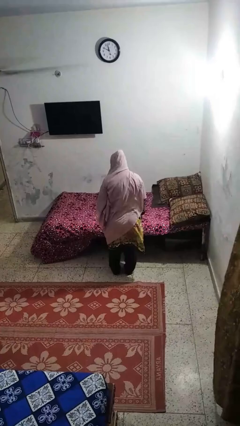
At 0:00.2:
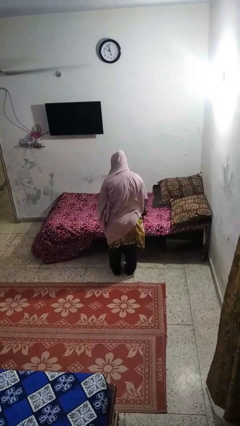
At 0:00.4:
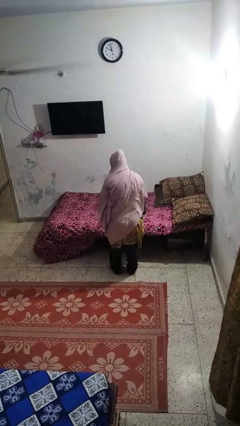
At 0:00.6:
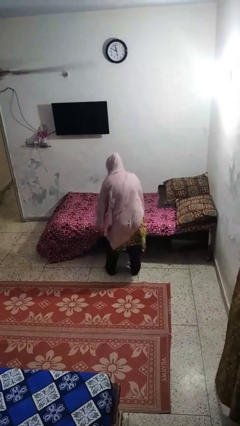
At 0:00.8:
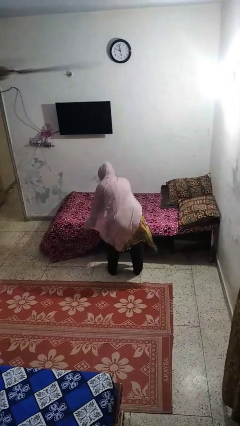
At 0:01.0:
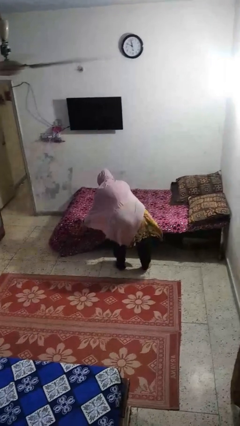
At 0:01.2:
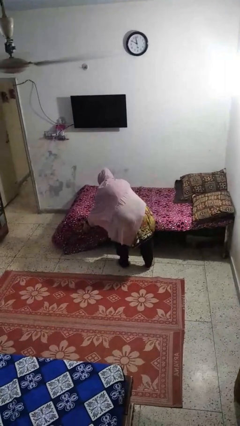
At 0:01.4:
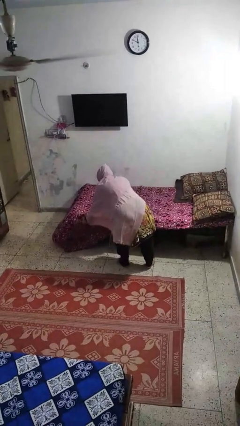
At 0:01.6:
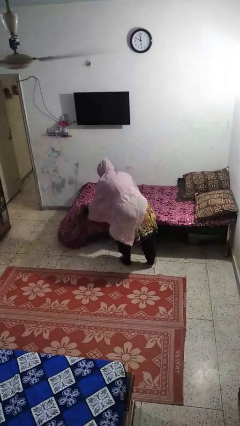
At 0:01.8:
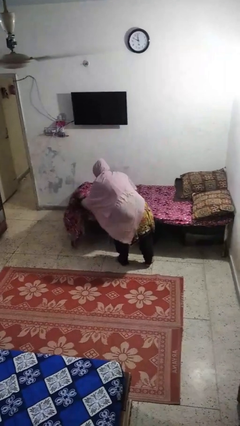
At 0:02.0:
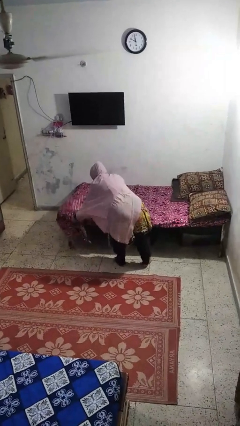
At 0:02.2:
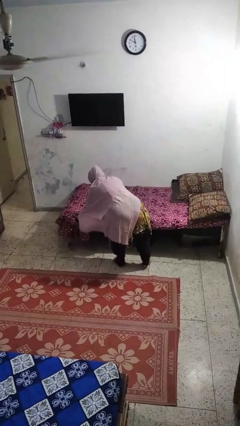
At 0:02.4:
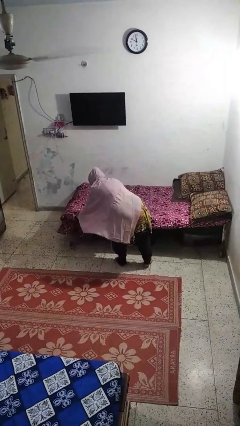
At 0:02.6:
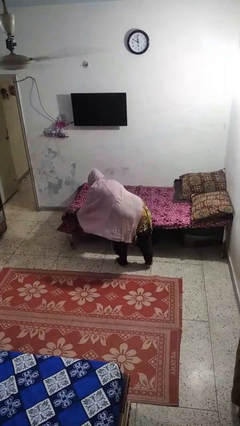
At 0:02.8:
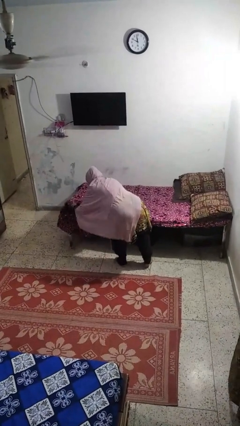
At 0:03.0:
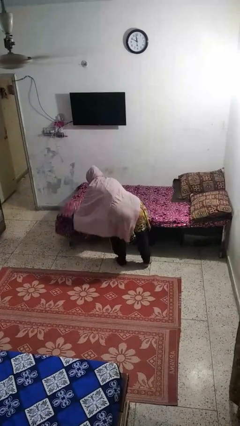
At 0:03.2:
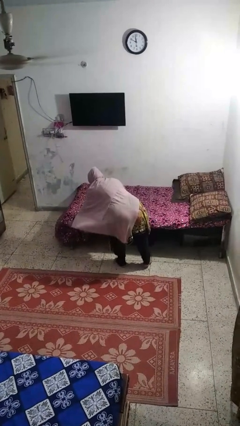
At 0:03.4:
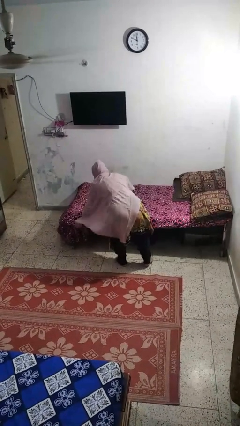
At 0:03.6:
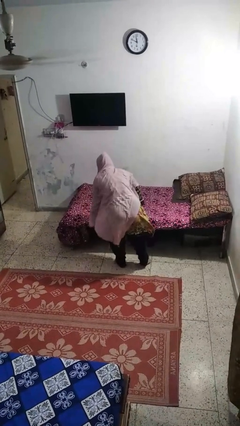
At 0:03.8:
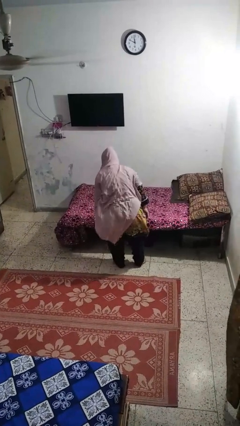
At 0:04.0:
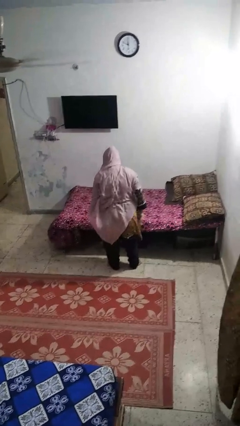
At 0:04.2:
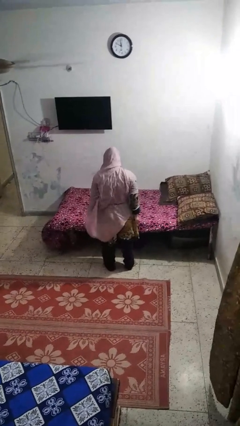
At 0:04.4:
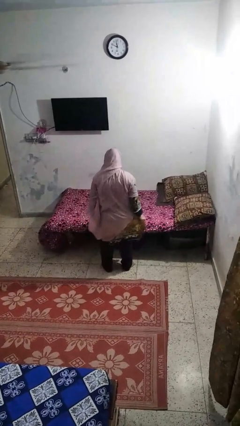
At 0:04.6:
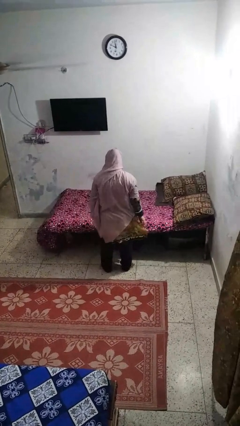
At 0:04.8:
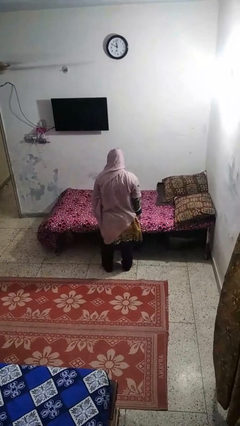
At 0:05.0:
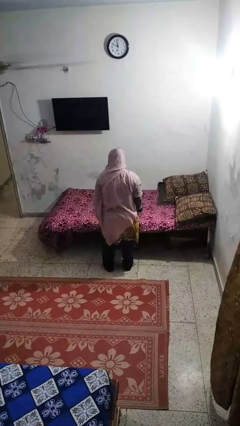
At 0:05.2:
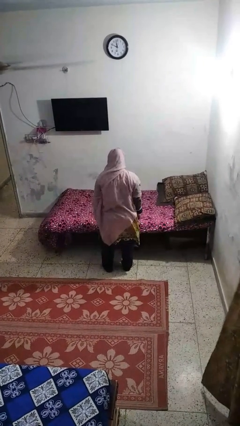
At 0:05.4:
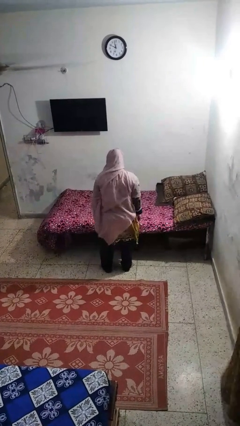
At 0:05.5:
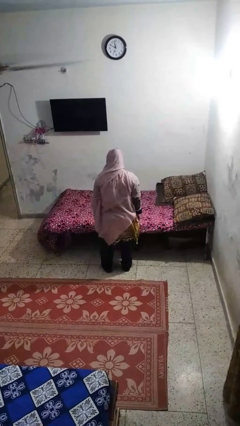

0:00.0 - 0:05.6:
person makes bed

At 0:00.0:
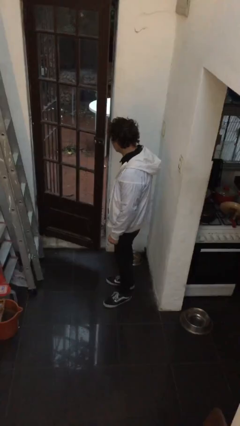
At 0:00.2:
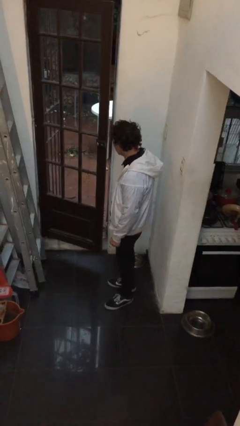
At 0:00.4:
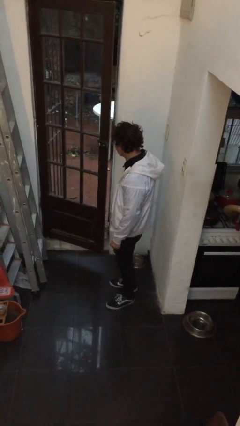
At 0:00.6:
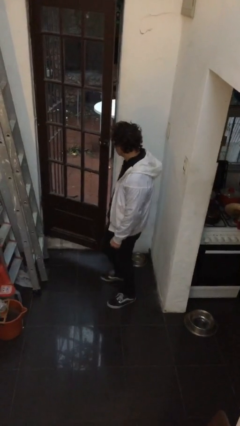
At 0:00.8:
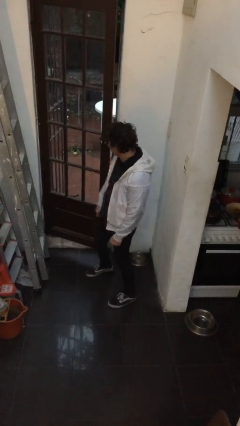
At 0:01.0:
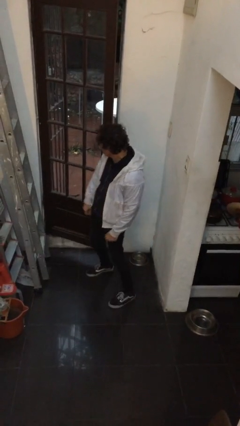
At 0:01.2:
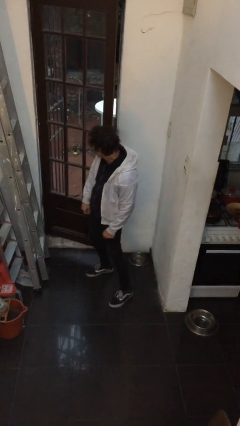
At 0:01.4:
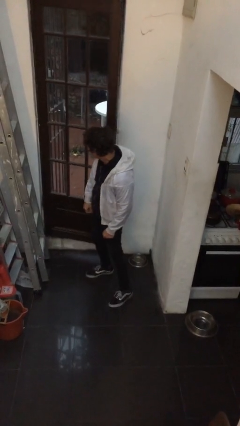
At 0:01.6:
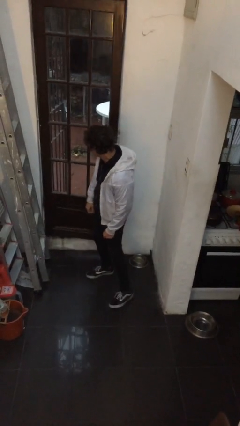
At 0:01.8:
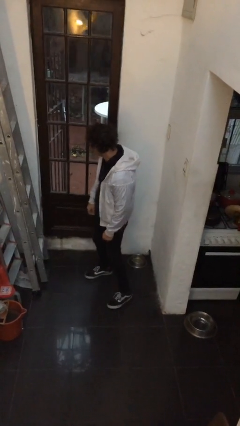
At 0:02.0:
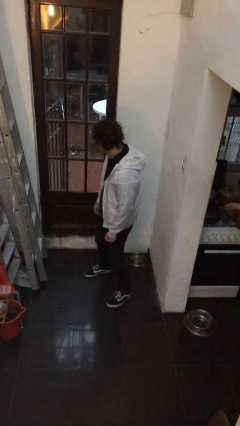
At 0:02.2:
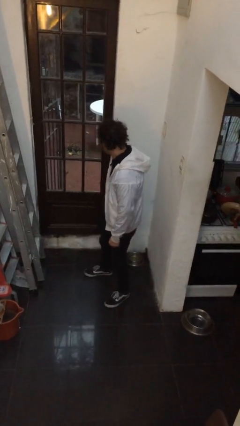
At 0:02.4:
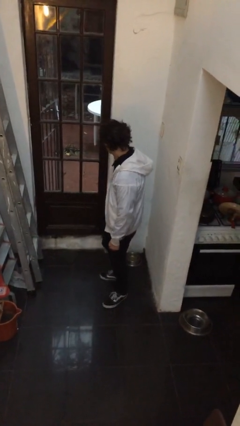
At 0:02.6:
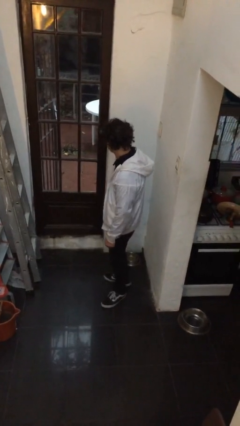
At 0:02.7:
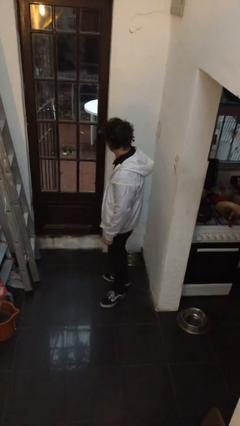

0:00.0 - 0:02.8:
person closes door with hip

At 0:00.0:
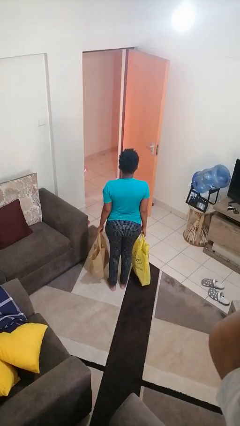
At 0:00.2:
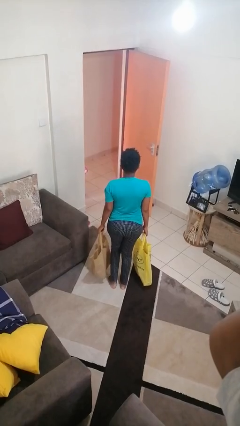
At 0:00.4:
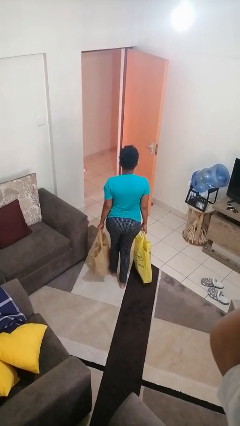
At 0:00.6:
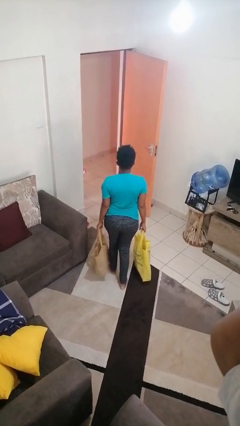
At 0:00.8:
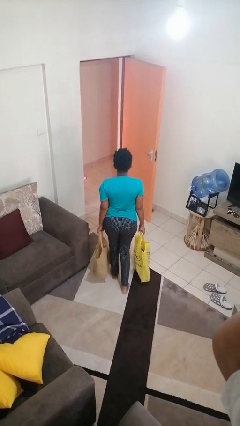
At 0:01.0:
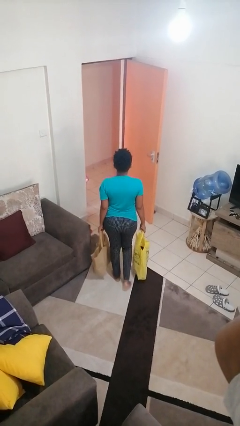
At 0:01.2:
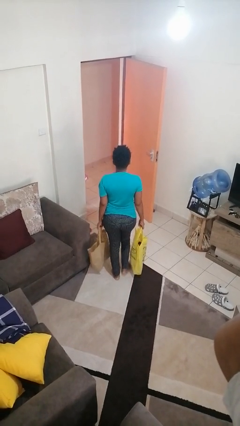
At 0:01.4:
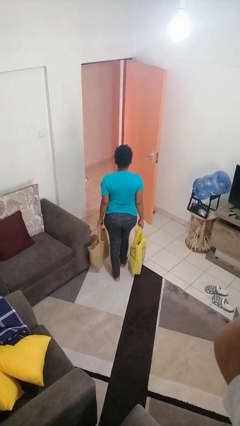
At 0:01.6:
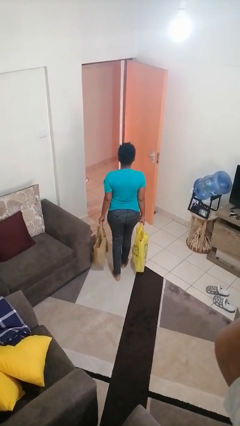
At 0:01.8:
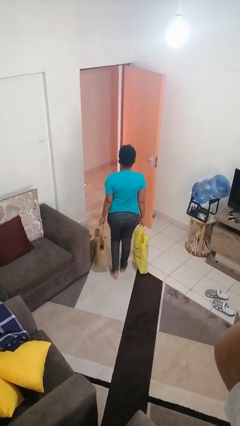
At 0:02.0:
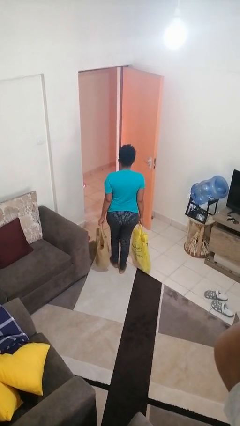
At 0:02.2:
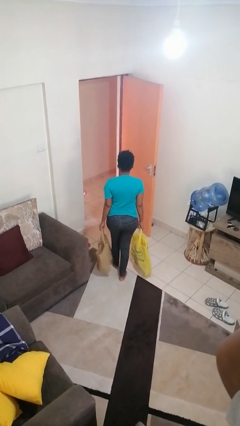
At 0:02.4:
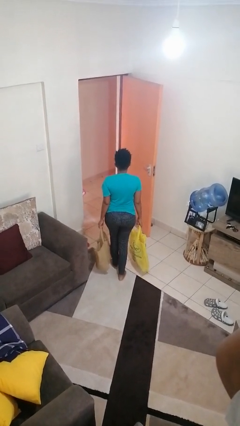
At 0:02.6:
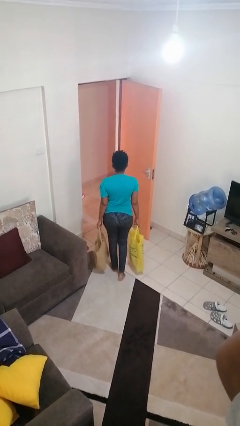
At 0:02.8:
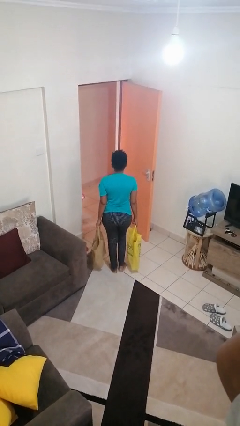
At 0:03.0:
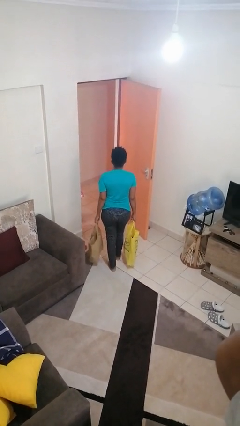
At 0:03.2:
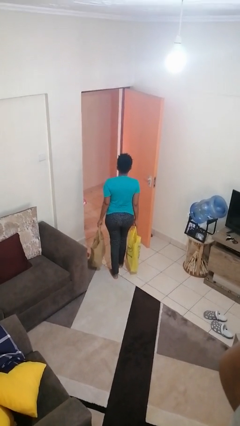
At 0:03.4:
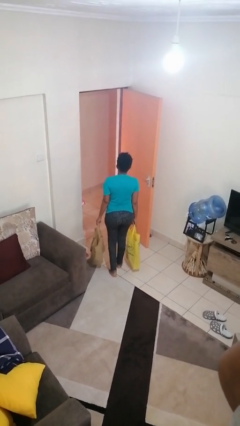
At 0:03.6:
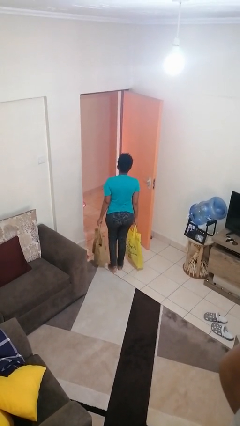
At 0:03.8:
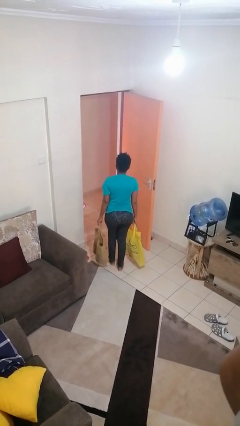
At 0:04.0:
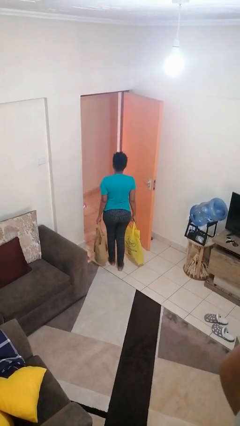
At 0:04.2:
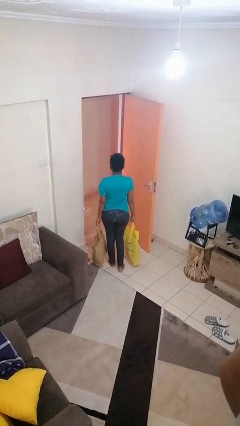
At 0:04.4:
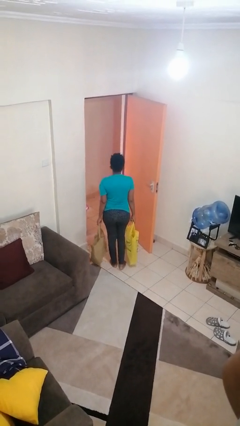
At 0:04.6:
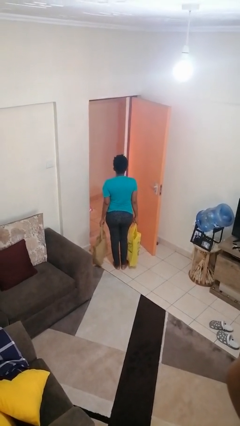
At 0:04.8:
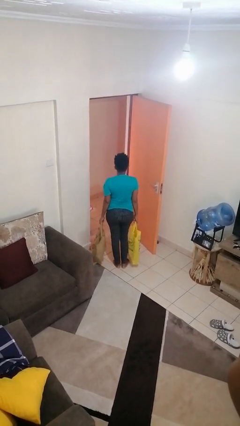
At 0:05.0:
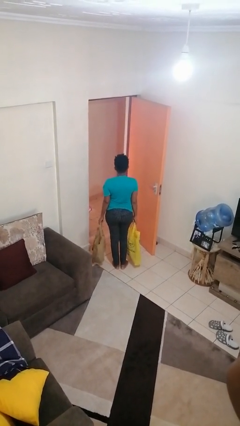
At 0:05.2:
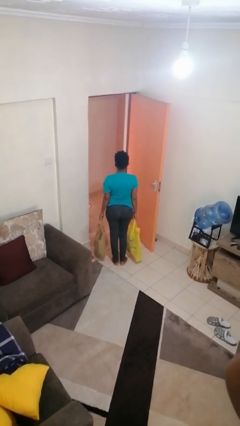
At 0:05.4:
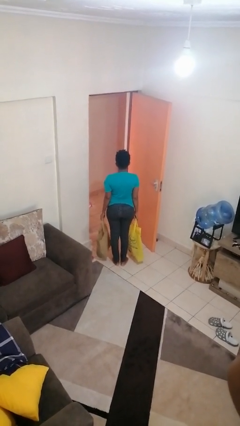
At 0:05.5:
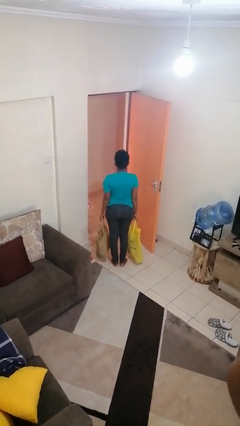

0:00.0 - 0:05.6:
person carries groceries

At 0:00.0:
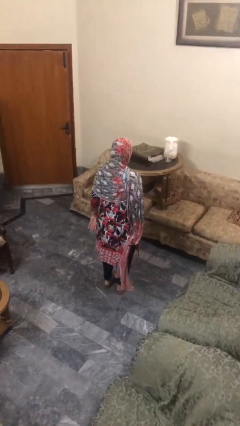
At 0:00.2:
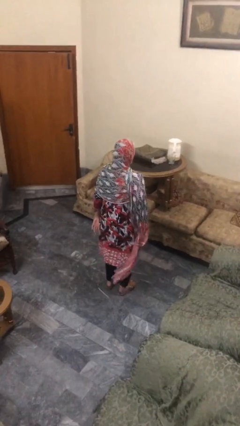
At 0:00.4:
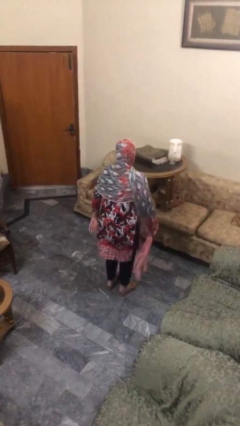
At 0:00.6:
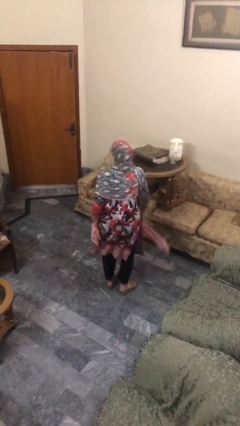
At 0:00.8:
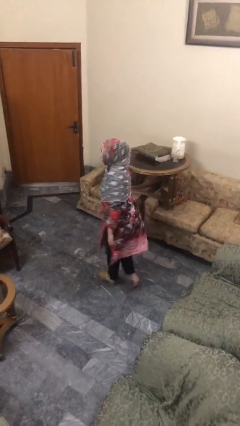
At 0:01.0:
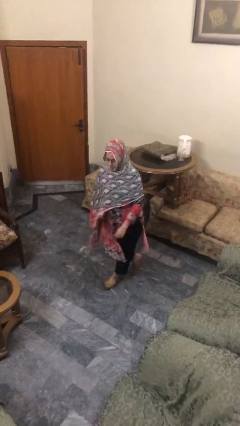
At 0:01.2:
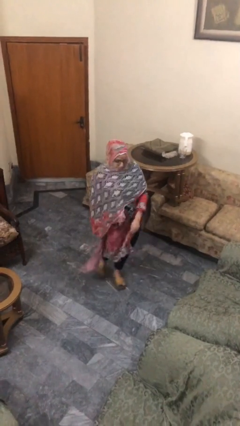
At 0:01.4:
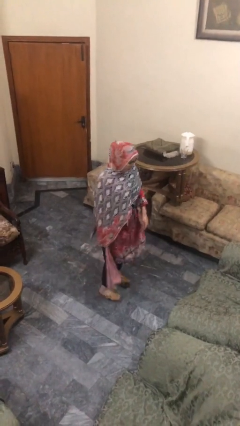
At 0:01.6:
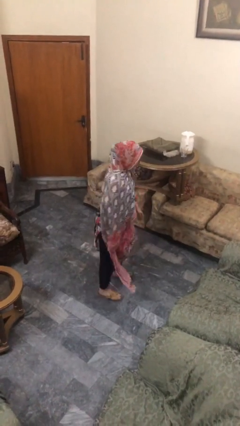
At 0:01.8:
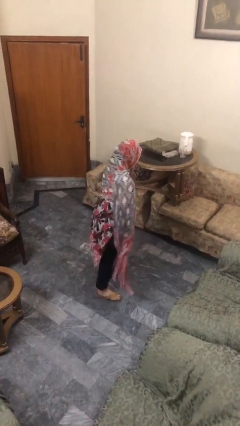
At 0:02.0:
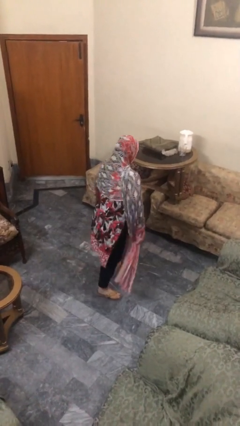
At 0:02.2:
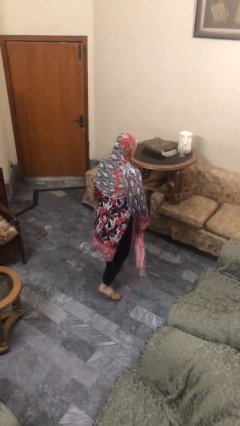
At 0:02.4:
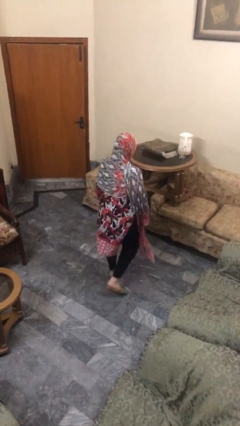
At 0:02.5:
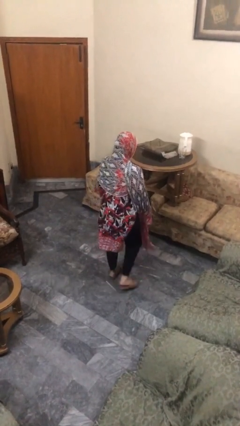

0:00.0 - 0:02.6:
person twirls

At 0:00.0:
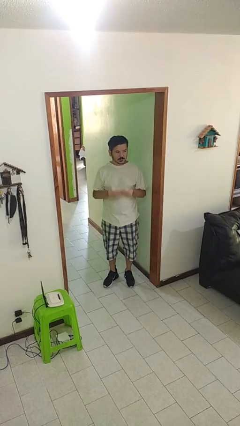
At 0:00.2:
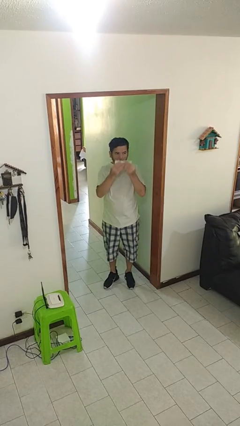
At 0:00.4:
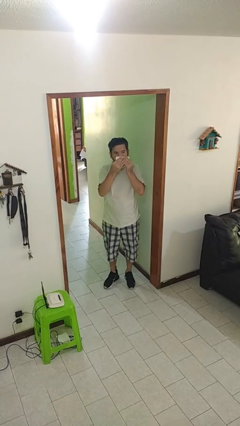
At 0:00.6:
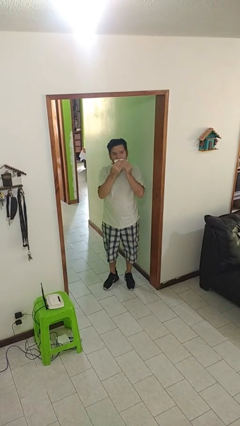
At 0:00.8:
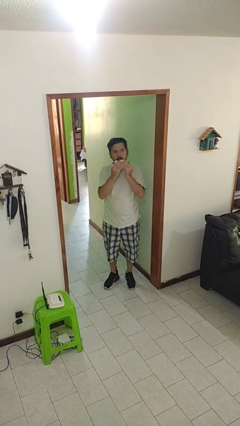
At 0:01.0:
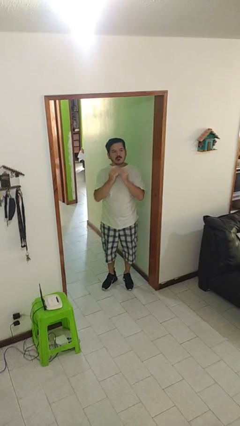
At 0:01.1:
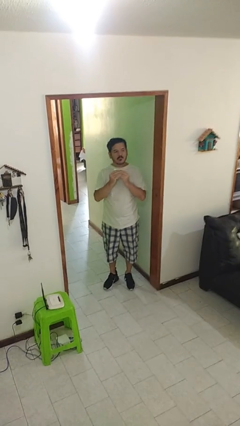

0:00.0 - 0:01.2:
person wipes mouth with napkin
